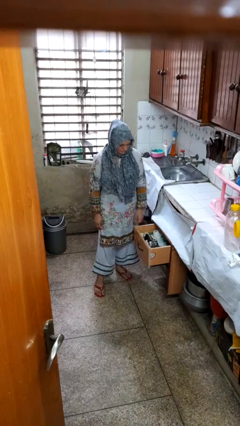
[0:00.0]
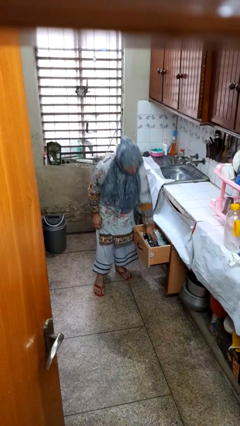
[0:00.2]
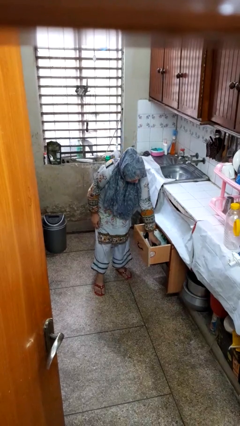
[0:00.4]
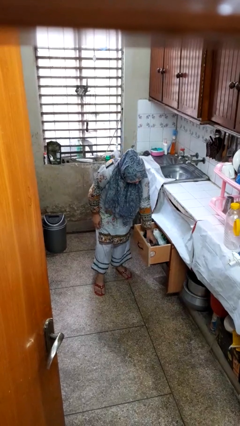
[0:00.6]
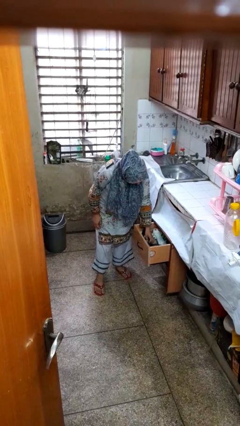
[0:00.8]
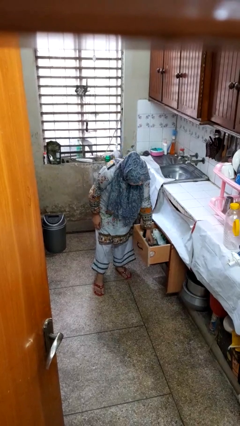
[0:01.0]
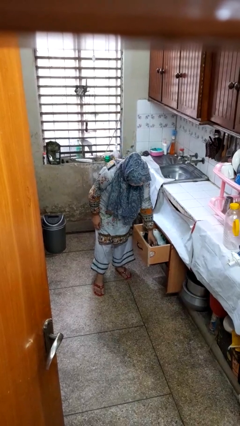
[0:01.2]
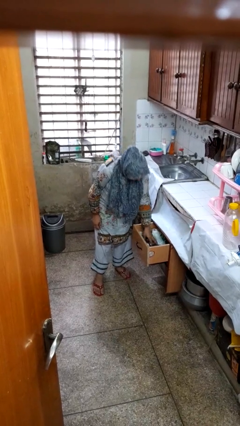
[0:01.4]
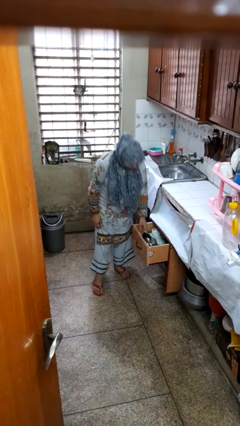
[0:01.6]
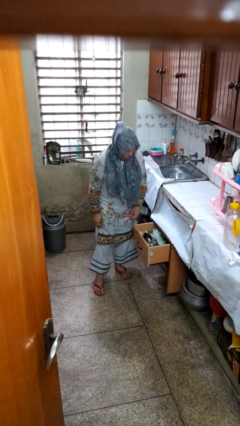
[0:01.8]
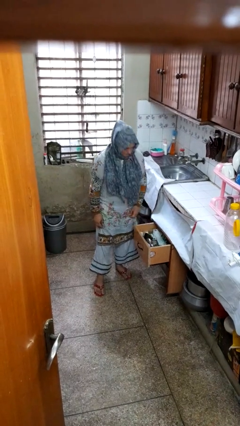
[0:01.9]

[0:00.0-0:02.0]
person searches in kitchen drawer

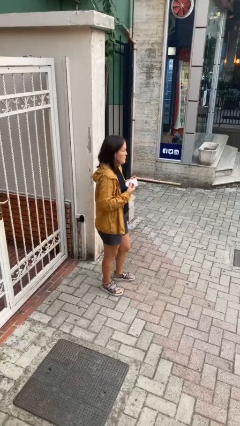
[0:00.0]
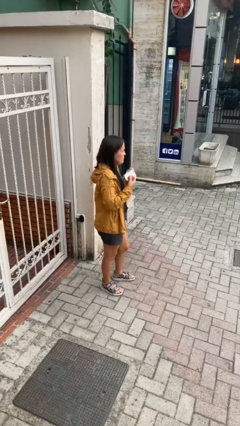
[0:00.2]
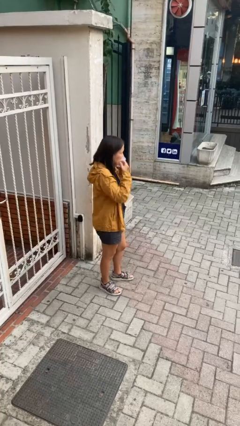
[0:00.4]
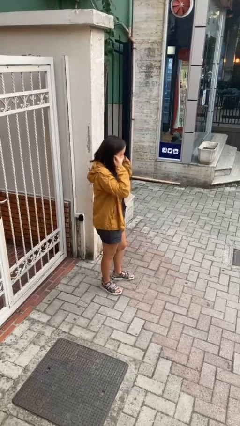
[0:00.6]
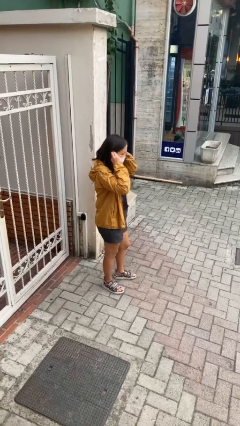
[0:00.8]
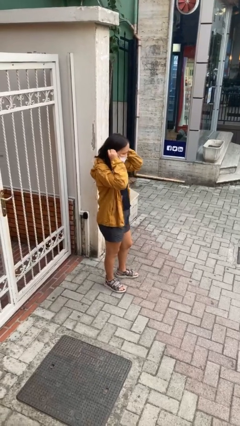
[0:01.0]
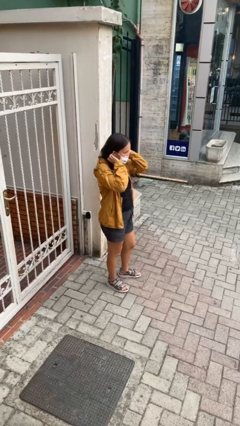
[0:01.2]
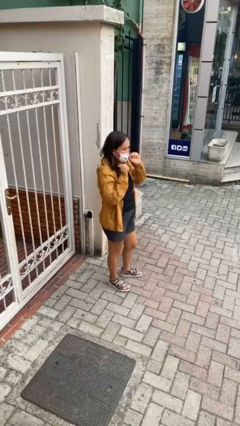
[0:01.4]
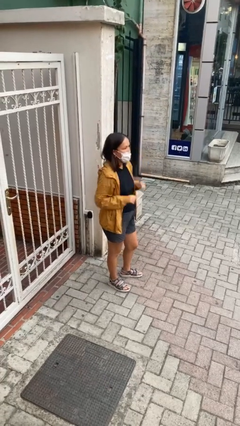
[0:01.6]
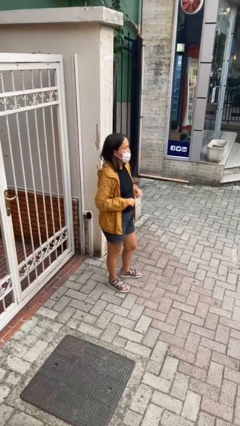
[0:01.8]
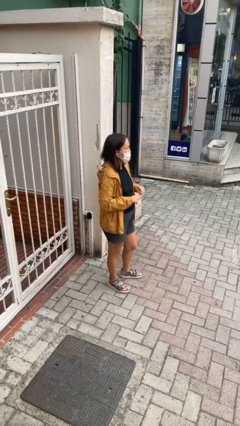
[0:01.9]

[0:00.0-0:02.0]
person puts on facemask

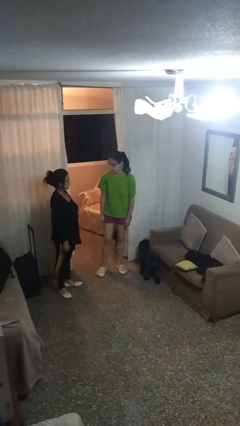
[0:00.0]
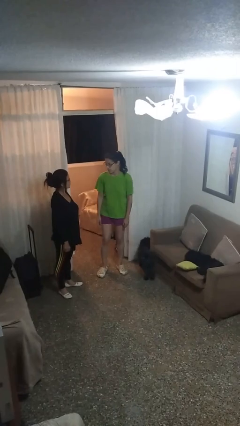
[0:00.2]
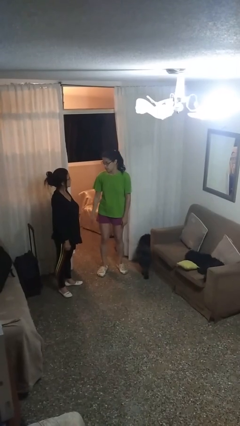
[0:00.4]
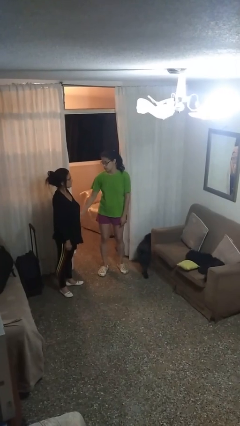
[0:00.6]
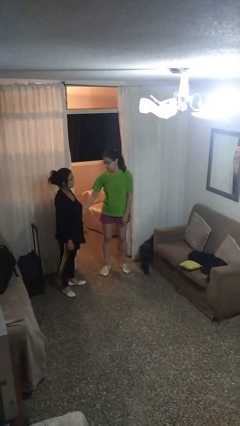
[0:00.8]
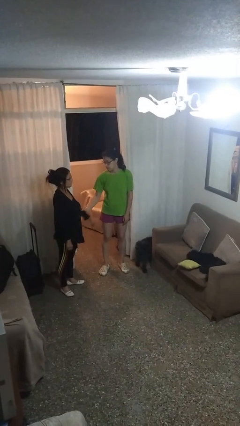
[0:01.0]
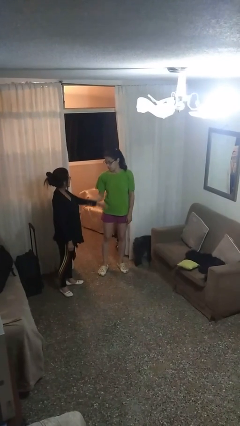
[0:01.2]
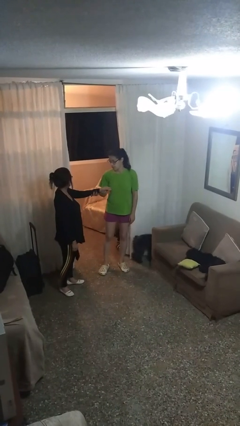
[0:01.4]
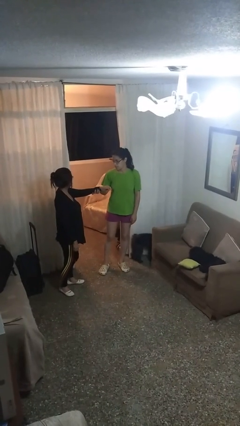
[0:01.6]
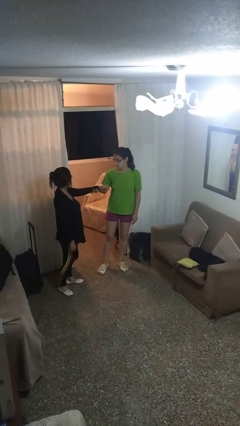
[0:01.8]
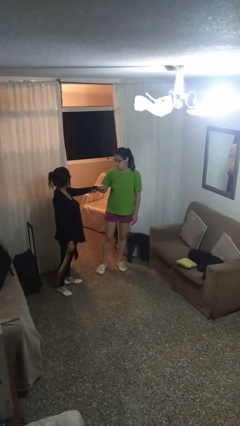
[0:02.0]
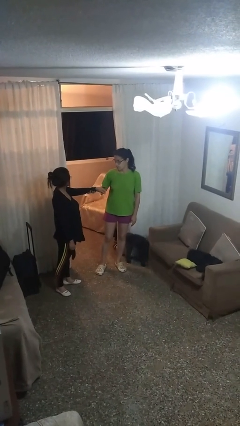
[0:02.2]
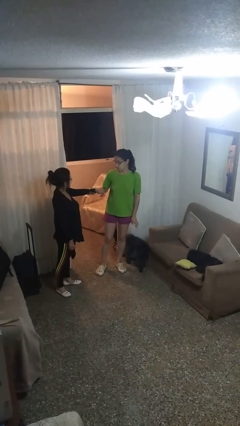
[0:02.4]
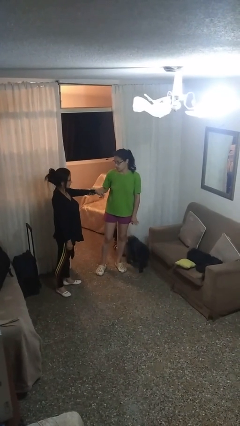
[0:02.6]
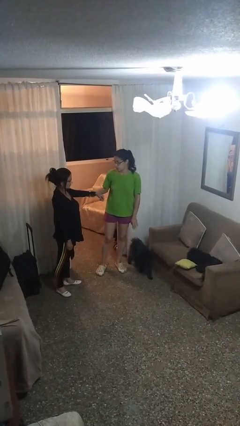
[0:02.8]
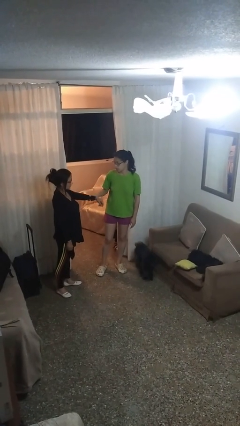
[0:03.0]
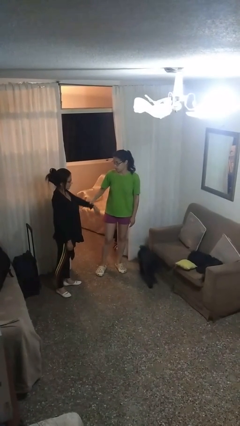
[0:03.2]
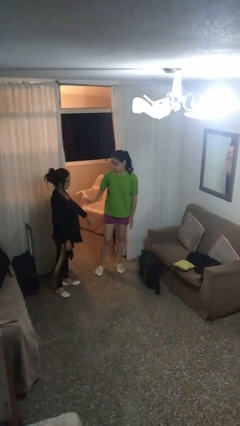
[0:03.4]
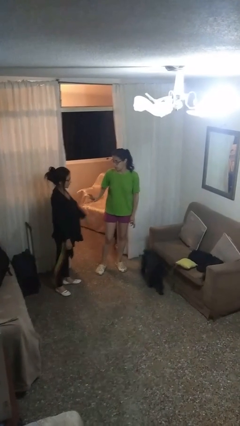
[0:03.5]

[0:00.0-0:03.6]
person grabs person by forearm

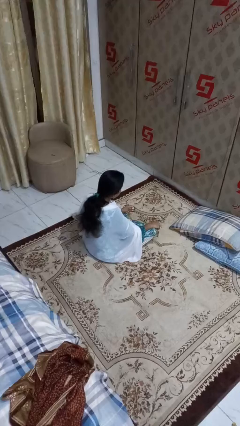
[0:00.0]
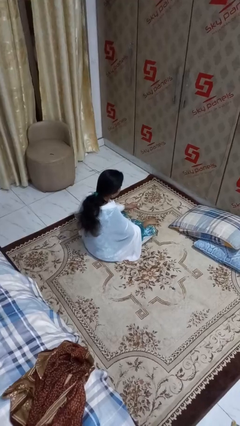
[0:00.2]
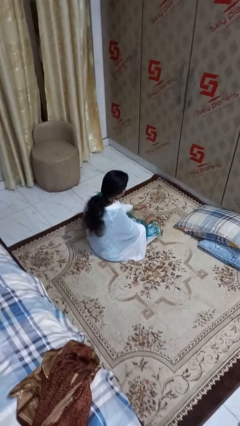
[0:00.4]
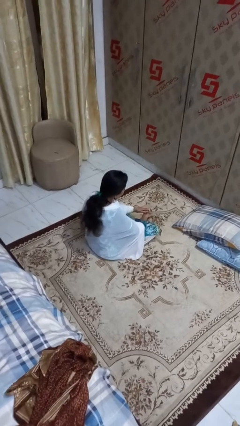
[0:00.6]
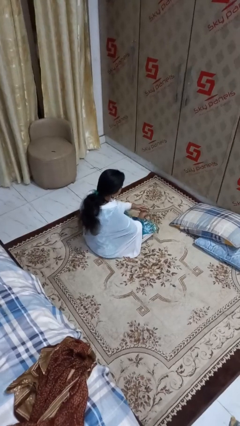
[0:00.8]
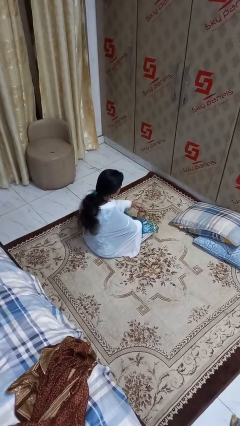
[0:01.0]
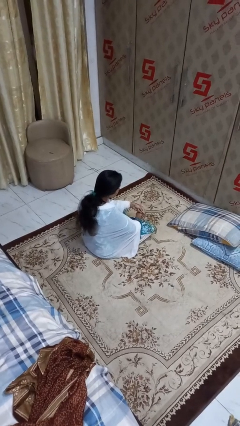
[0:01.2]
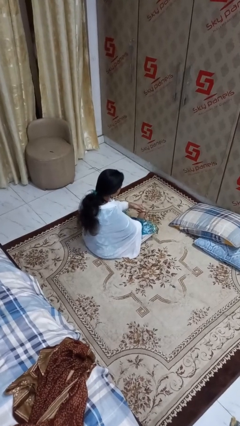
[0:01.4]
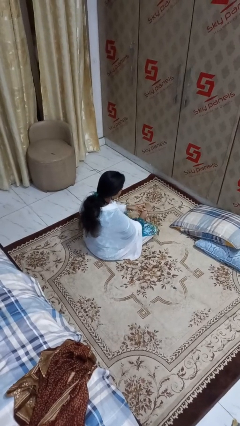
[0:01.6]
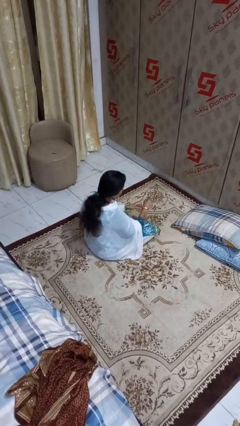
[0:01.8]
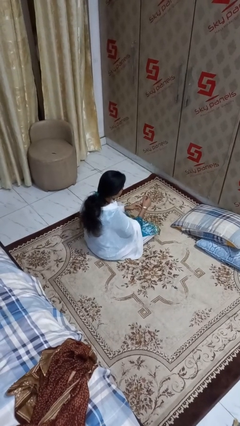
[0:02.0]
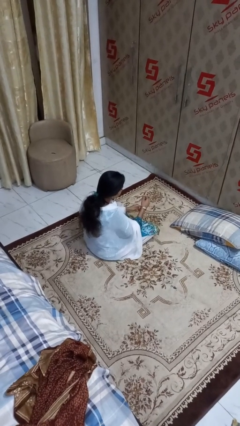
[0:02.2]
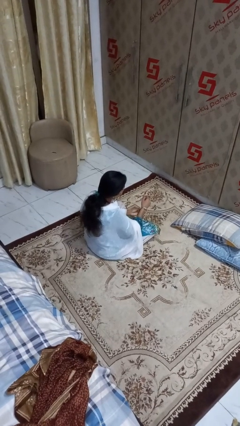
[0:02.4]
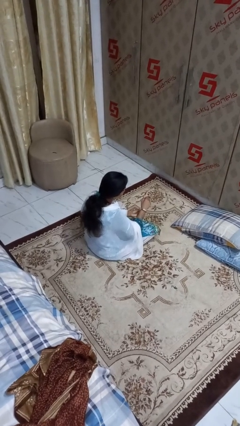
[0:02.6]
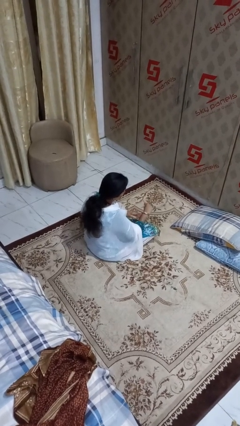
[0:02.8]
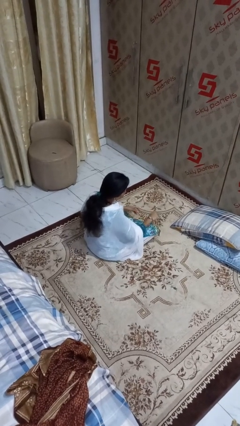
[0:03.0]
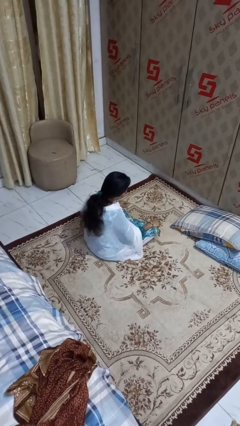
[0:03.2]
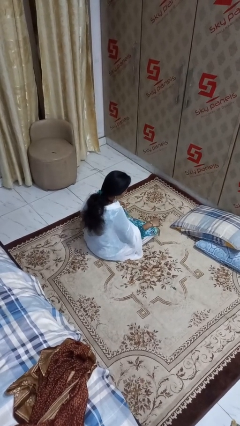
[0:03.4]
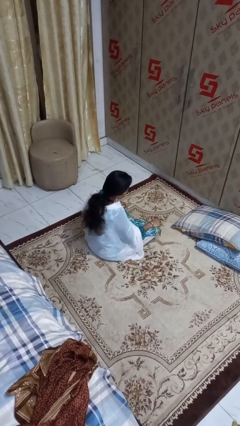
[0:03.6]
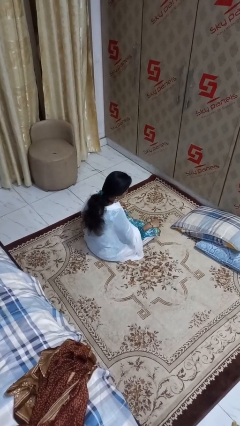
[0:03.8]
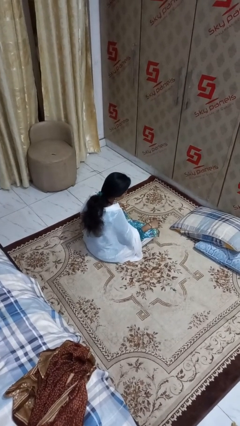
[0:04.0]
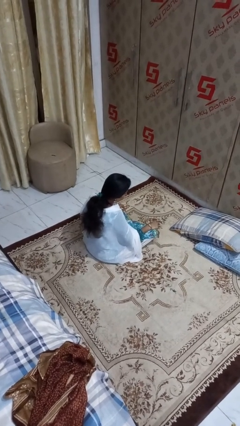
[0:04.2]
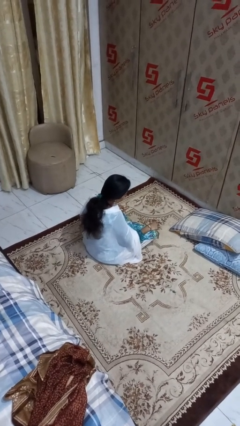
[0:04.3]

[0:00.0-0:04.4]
person puts on wristwatch

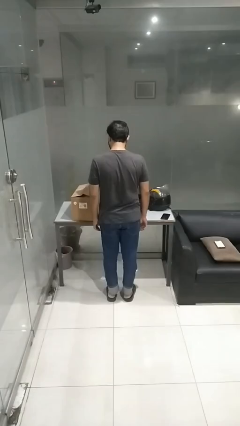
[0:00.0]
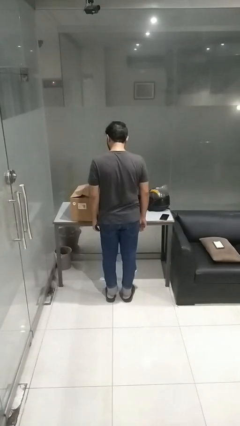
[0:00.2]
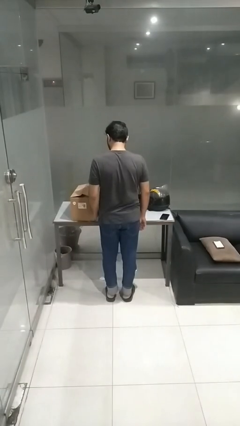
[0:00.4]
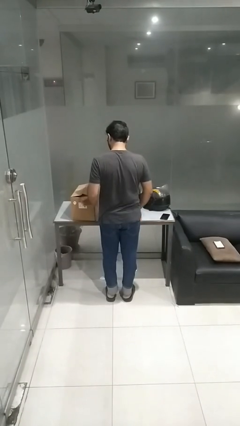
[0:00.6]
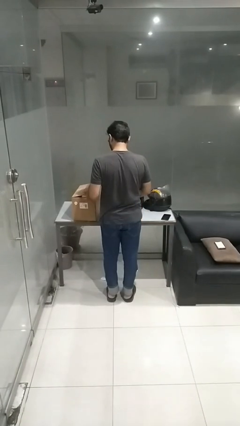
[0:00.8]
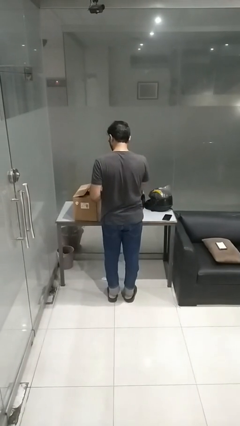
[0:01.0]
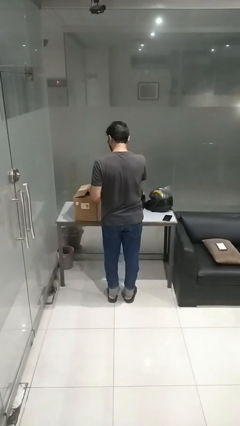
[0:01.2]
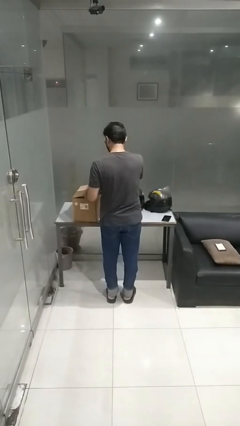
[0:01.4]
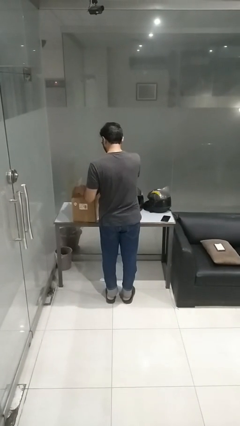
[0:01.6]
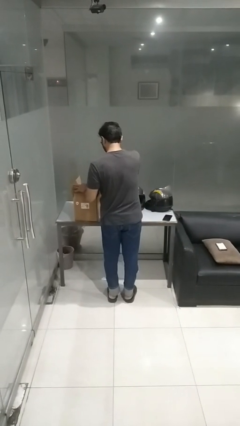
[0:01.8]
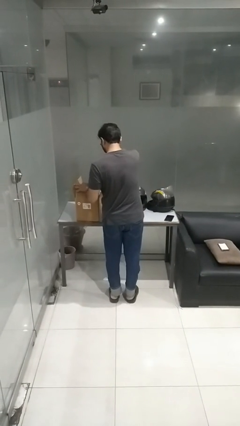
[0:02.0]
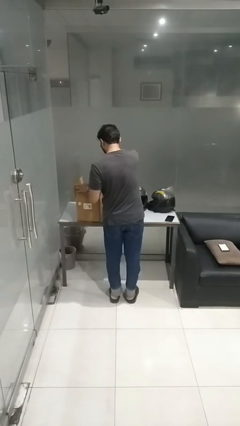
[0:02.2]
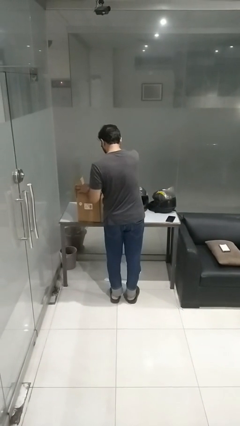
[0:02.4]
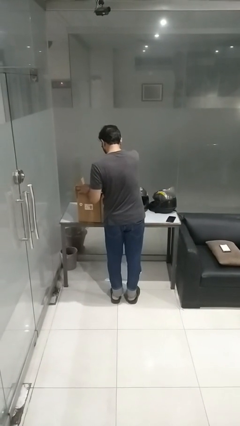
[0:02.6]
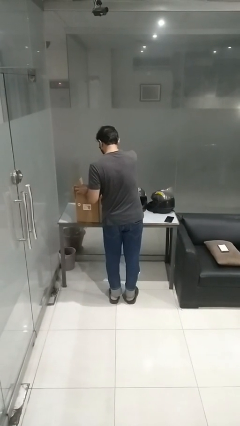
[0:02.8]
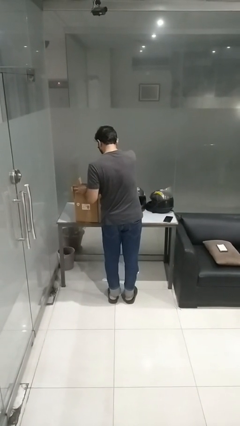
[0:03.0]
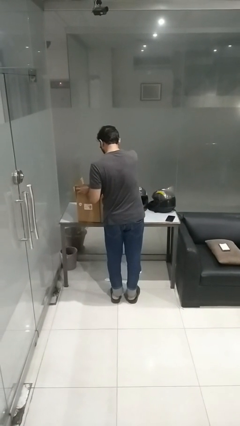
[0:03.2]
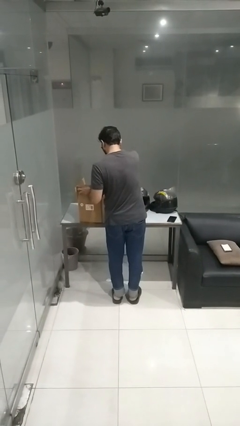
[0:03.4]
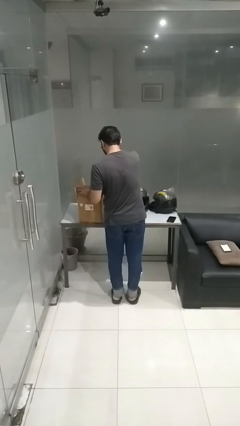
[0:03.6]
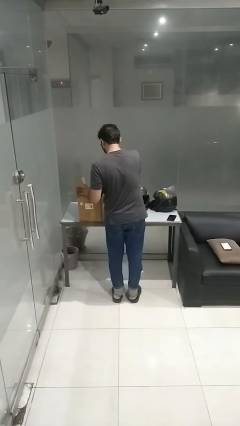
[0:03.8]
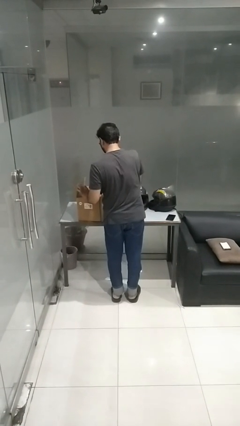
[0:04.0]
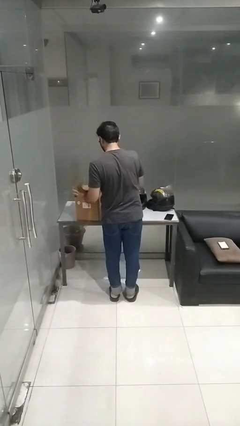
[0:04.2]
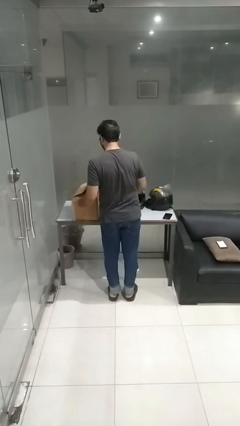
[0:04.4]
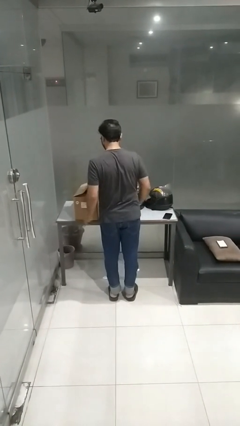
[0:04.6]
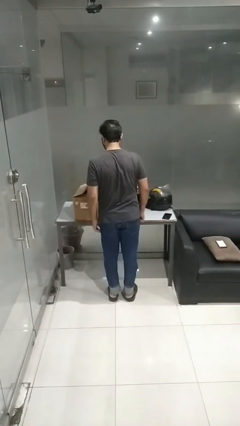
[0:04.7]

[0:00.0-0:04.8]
person searches in box

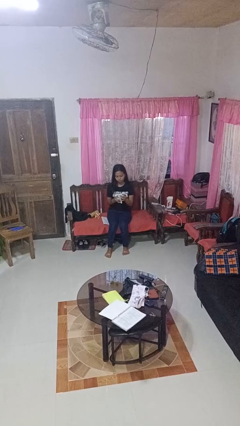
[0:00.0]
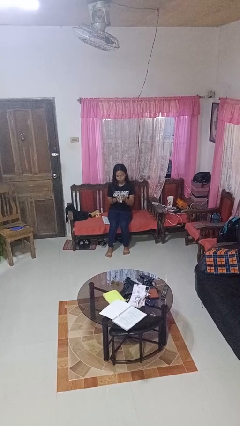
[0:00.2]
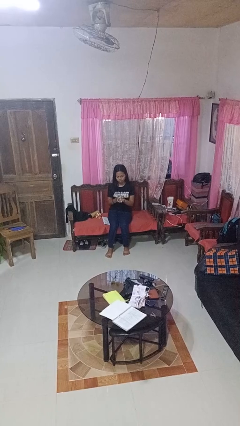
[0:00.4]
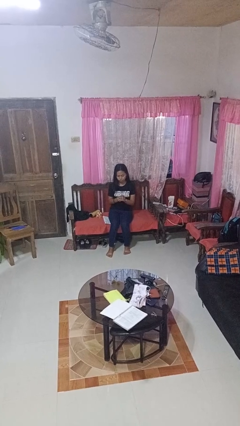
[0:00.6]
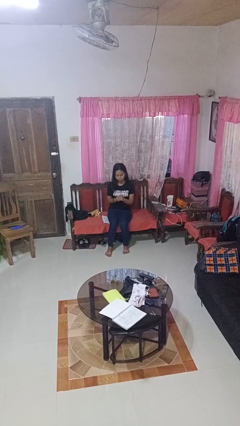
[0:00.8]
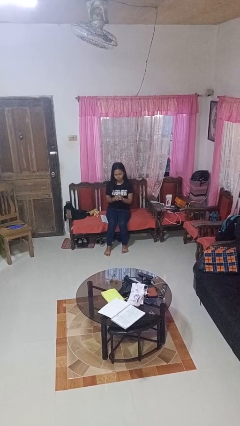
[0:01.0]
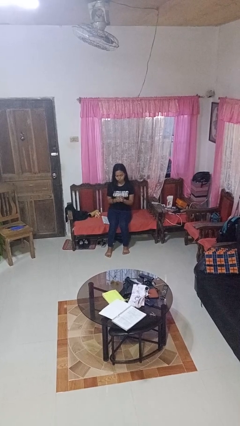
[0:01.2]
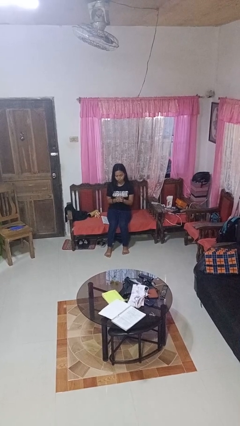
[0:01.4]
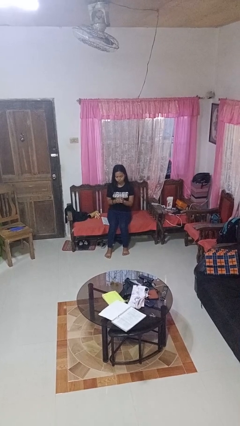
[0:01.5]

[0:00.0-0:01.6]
person crumples paper
